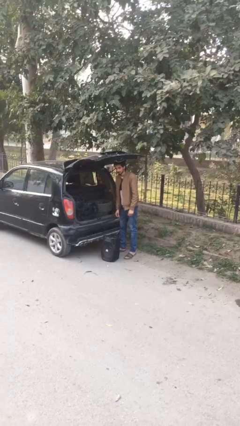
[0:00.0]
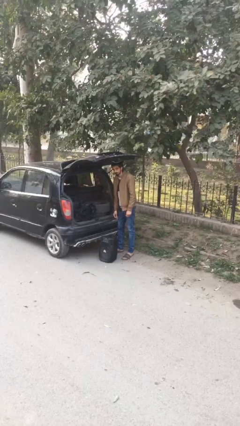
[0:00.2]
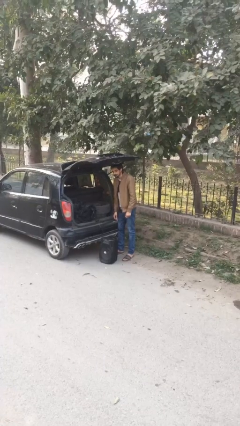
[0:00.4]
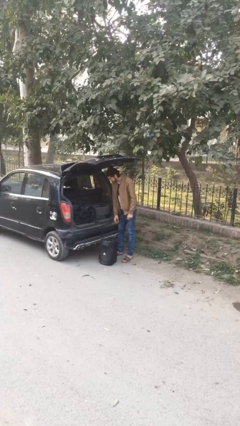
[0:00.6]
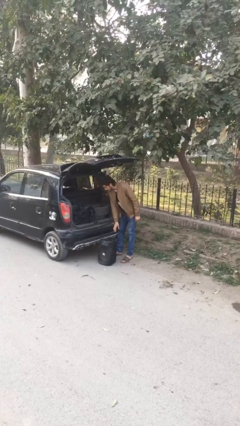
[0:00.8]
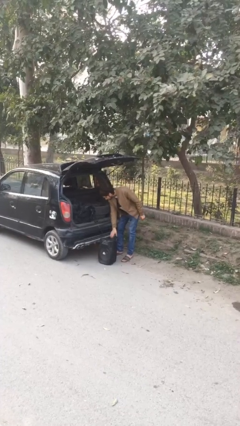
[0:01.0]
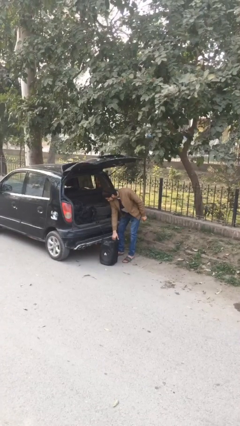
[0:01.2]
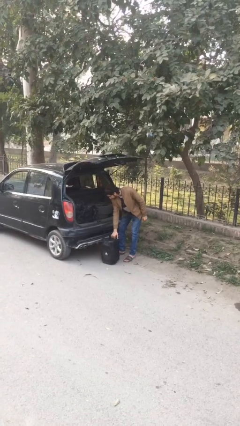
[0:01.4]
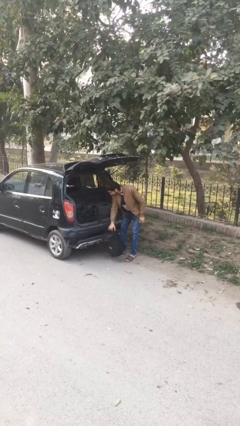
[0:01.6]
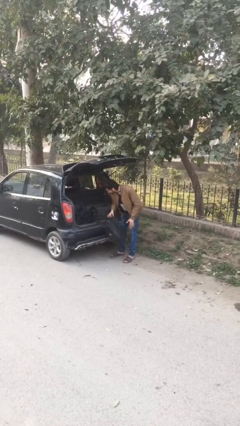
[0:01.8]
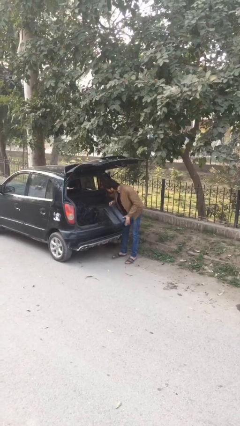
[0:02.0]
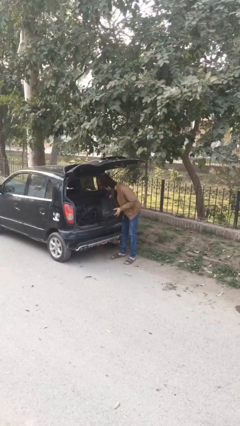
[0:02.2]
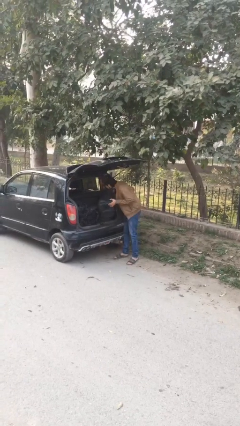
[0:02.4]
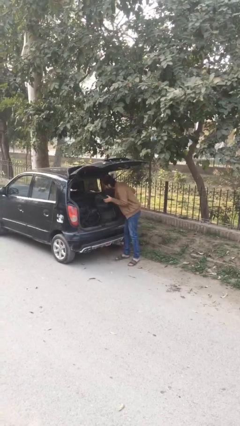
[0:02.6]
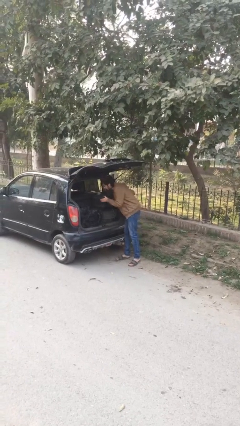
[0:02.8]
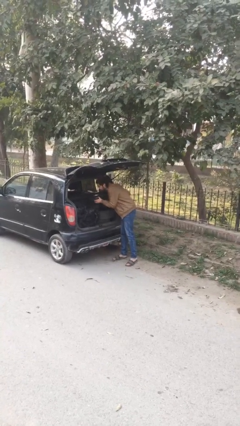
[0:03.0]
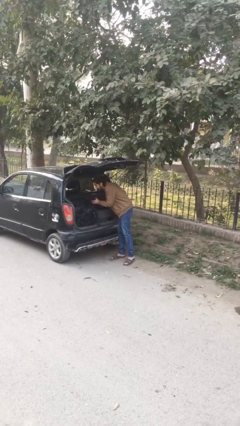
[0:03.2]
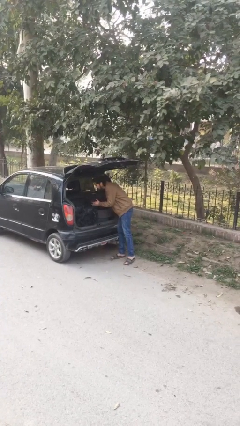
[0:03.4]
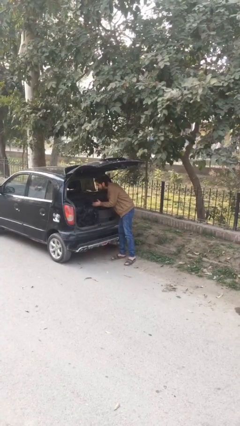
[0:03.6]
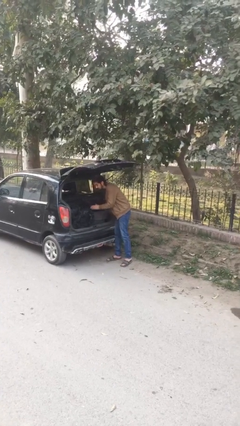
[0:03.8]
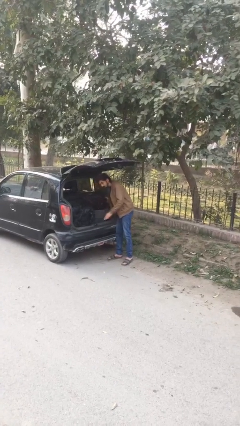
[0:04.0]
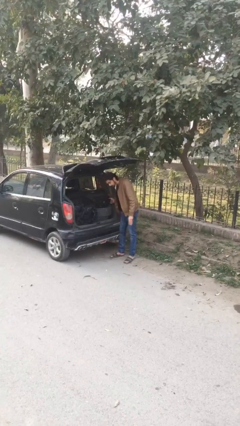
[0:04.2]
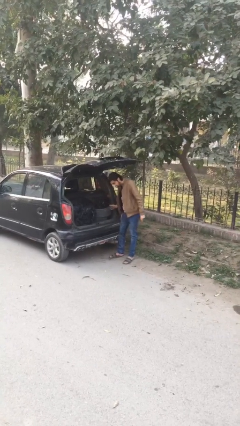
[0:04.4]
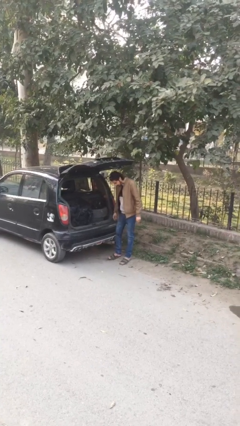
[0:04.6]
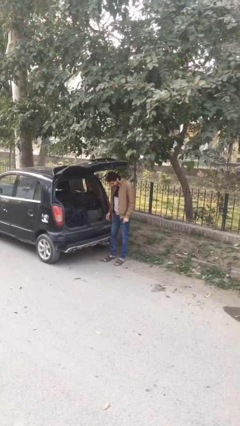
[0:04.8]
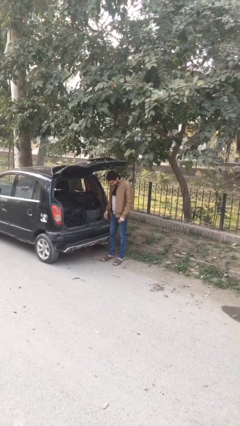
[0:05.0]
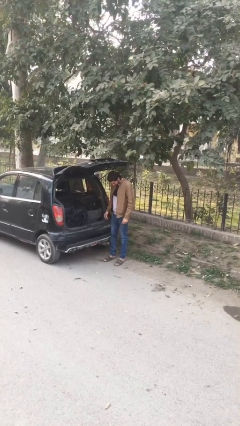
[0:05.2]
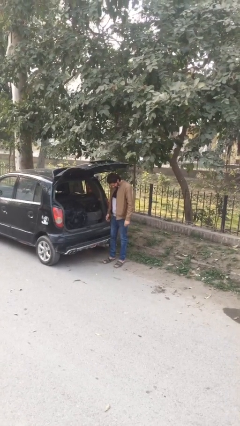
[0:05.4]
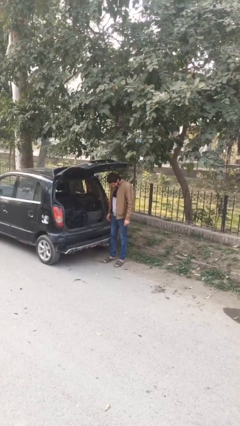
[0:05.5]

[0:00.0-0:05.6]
person loads car

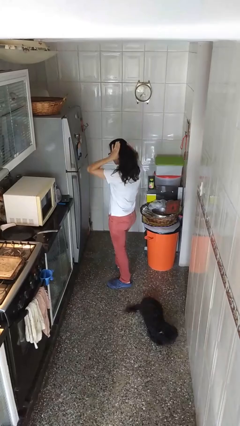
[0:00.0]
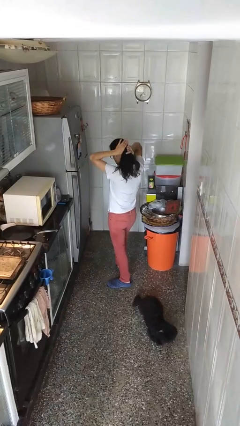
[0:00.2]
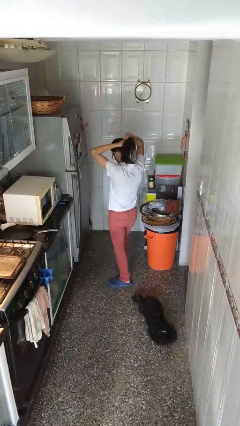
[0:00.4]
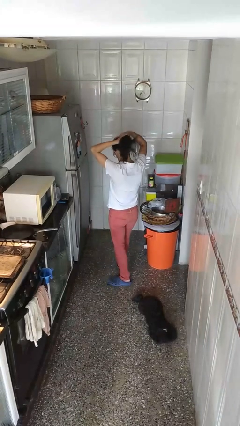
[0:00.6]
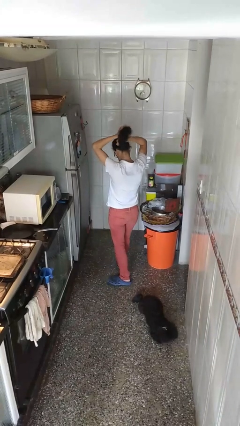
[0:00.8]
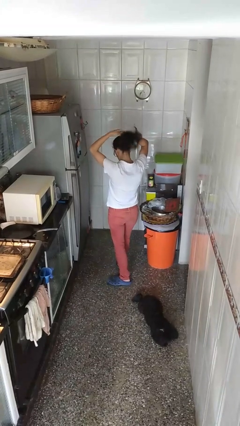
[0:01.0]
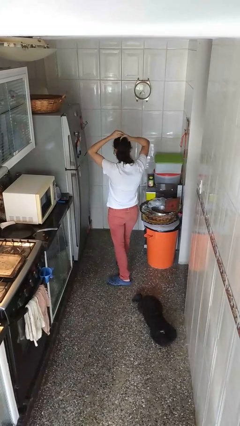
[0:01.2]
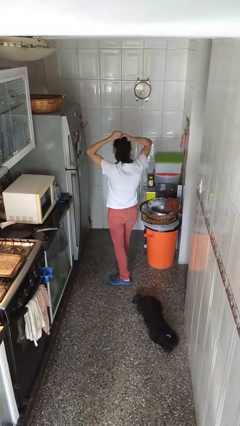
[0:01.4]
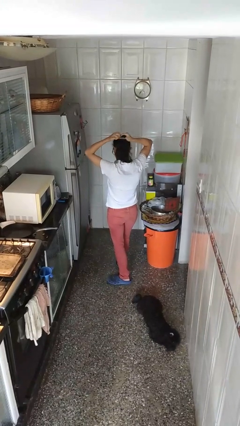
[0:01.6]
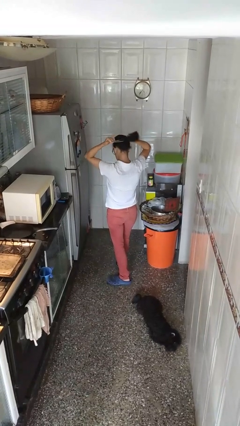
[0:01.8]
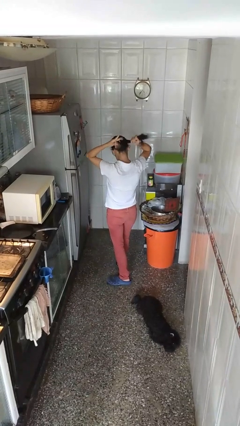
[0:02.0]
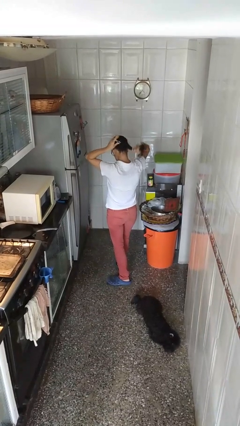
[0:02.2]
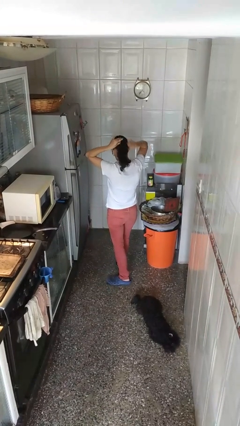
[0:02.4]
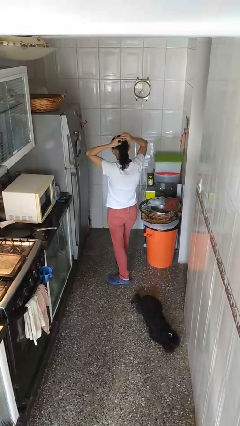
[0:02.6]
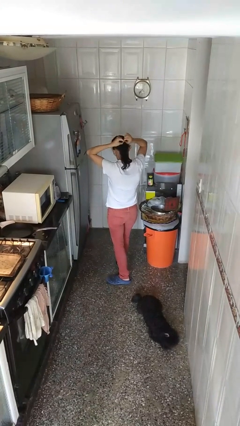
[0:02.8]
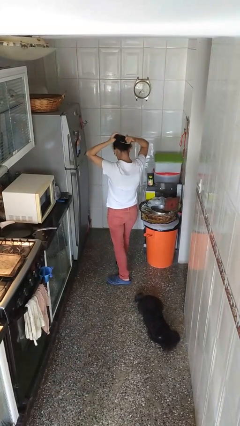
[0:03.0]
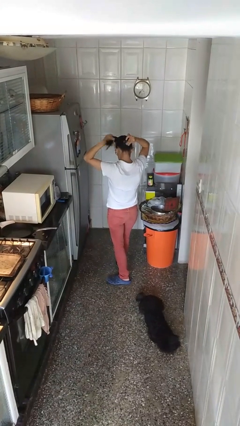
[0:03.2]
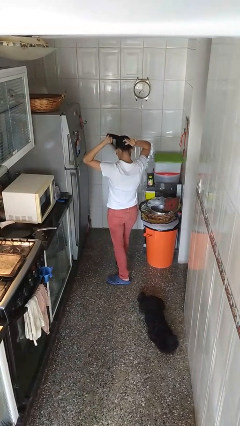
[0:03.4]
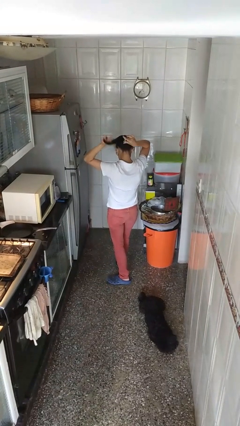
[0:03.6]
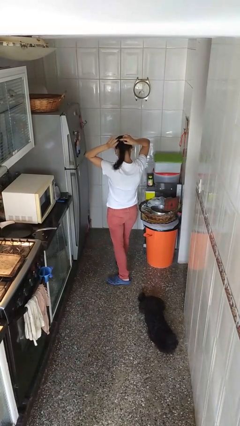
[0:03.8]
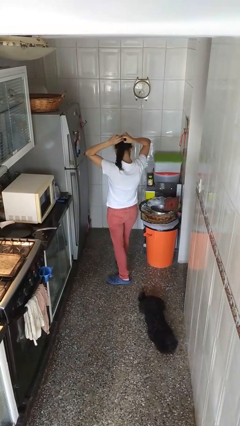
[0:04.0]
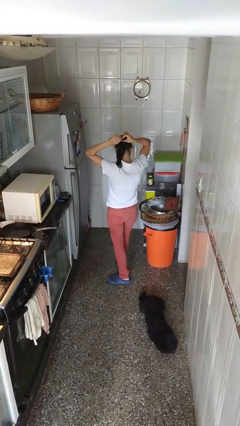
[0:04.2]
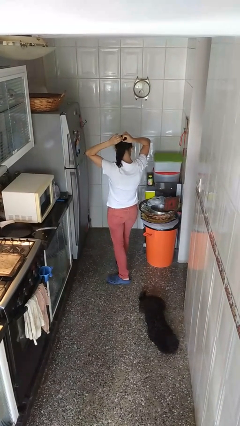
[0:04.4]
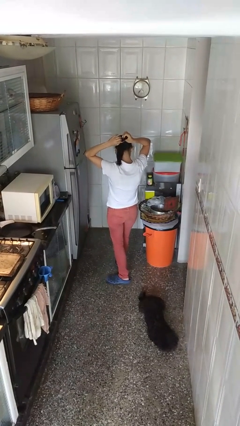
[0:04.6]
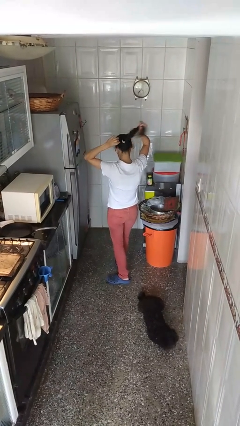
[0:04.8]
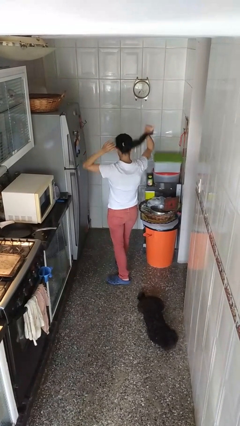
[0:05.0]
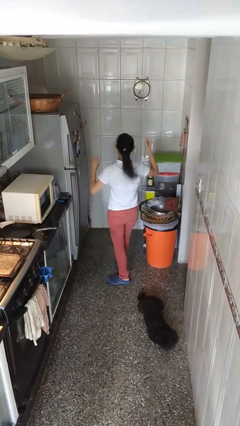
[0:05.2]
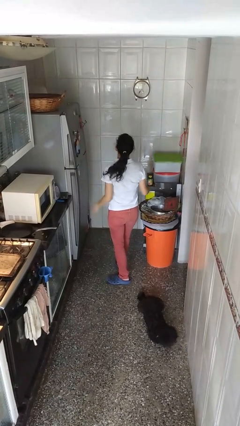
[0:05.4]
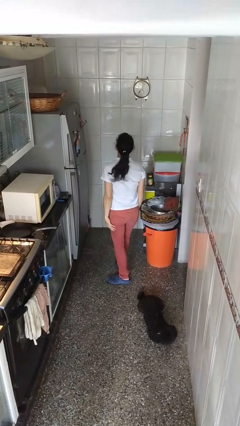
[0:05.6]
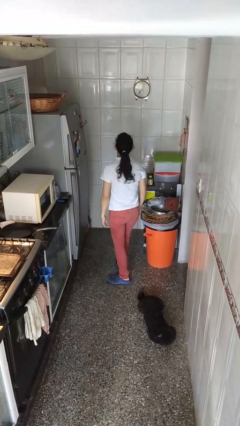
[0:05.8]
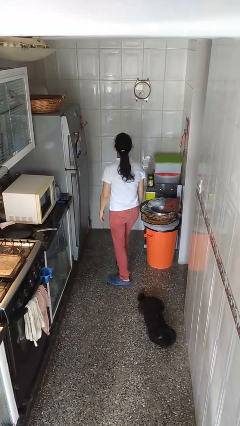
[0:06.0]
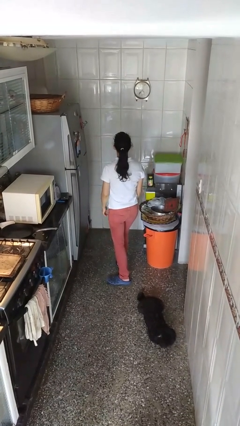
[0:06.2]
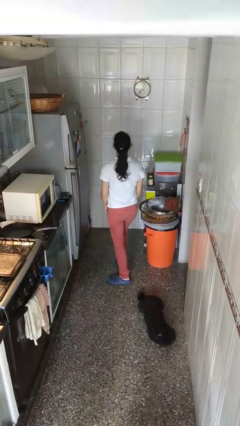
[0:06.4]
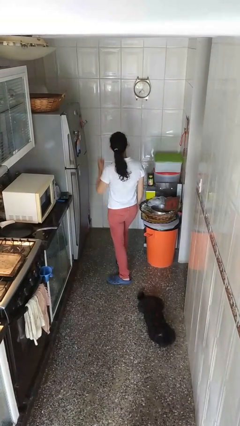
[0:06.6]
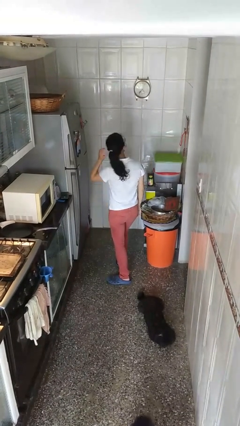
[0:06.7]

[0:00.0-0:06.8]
person puts hair in ponytail

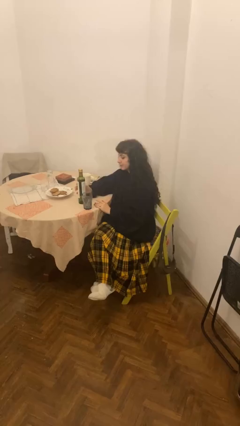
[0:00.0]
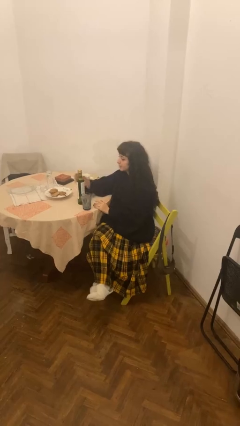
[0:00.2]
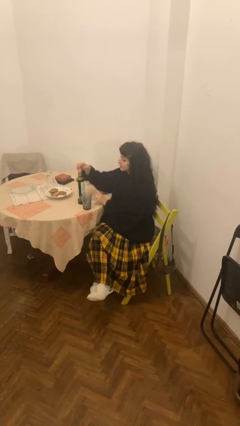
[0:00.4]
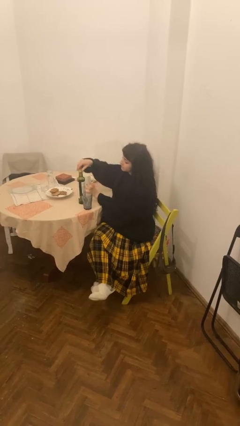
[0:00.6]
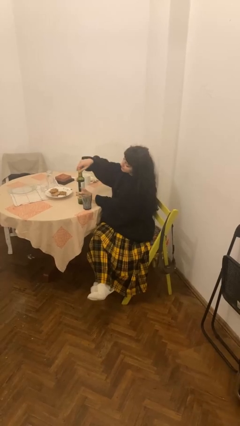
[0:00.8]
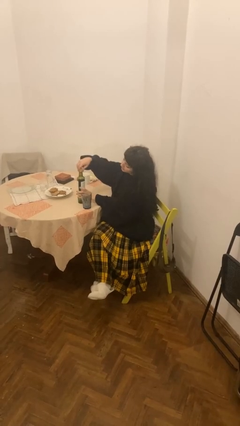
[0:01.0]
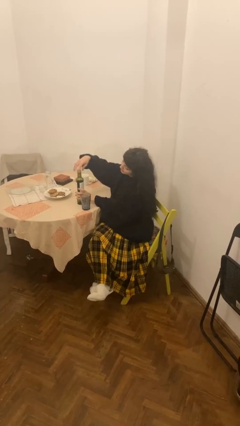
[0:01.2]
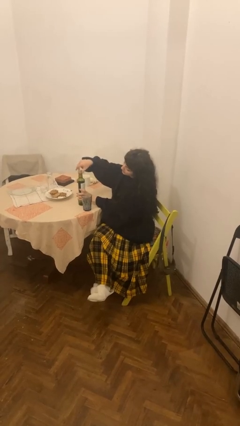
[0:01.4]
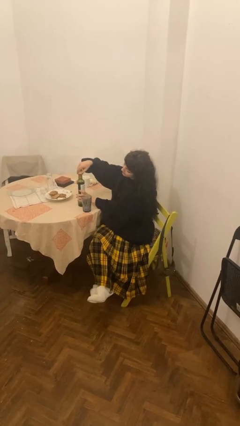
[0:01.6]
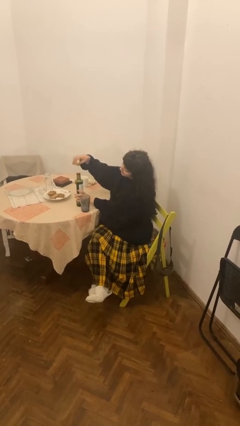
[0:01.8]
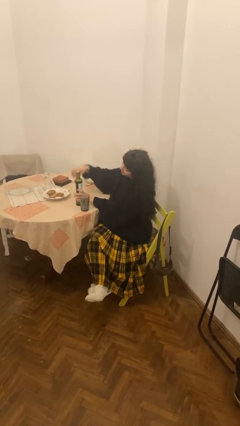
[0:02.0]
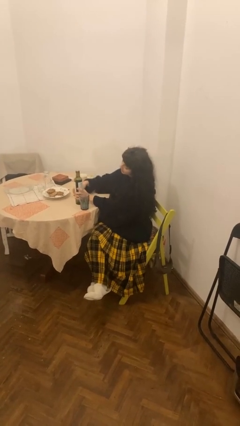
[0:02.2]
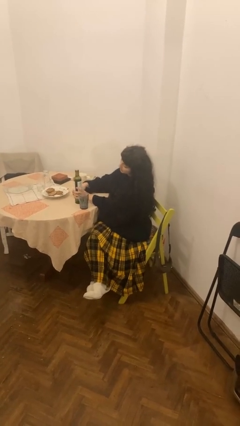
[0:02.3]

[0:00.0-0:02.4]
person unscrews lid from bottle

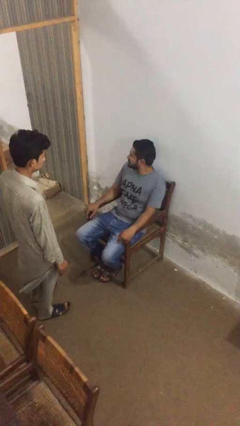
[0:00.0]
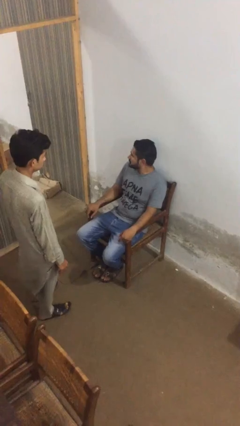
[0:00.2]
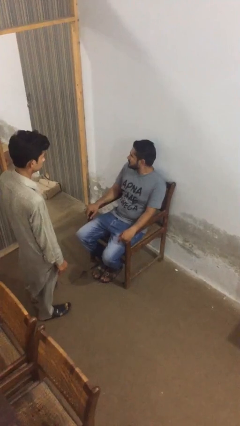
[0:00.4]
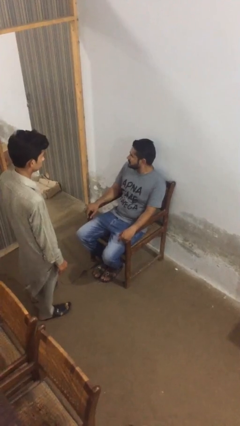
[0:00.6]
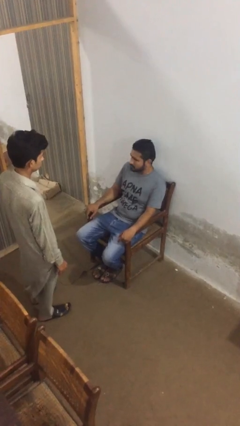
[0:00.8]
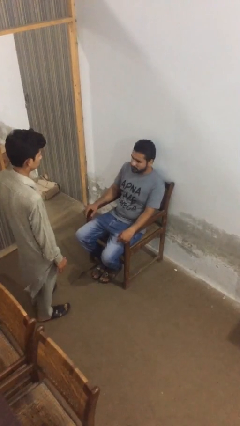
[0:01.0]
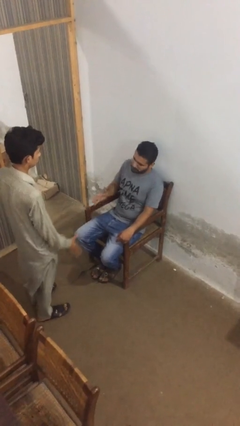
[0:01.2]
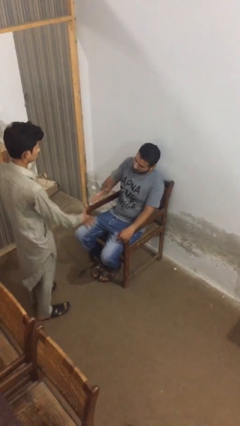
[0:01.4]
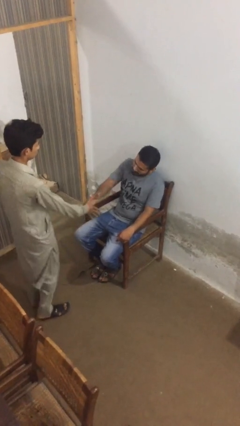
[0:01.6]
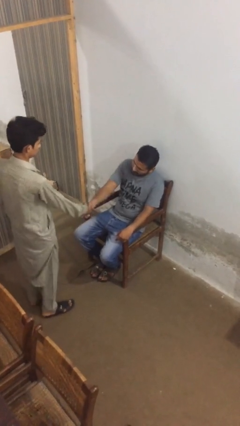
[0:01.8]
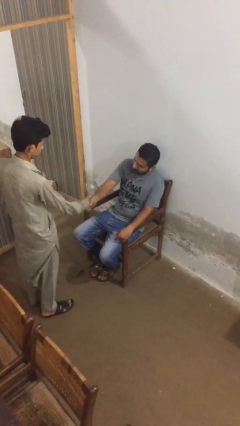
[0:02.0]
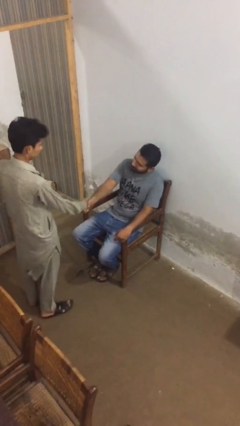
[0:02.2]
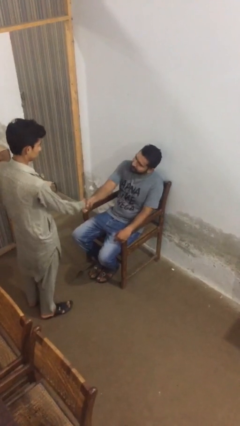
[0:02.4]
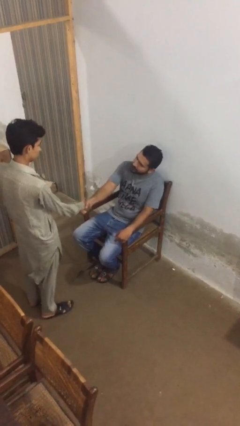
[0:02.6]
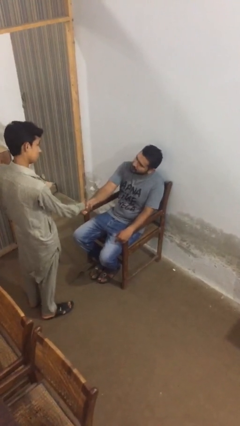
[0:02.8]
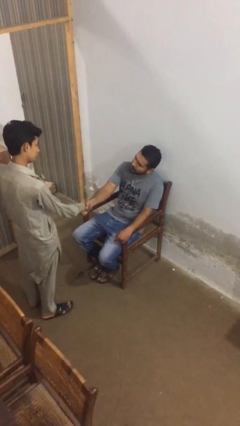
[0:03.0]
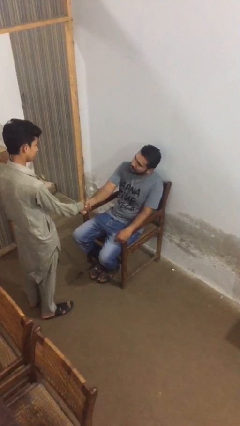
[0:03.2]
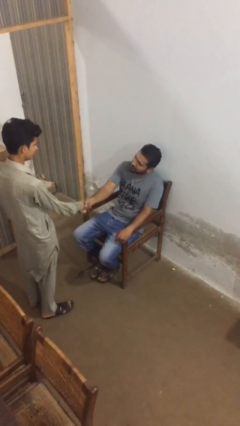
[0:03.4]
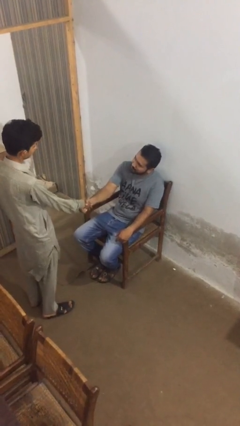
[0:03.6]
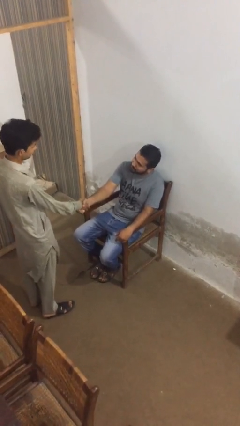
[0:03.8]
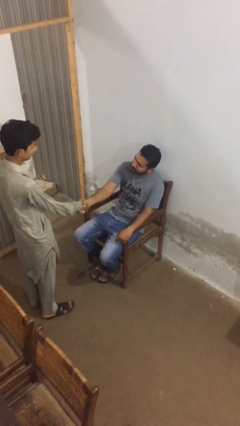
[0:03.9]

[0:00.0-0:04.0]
person shakes hand
